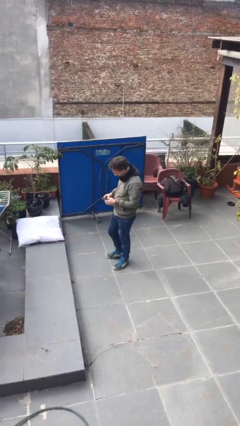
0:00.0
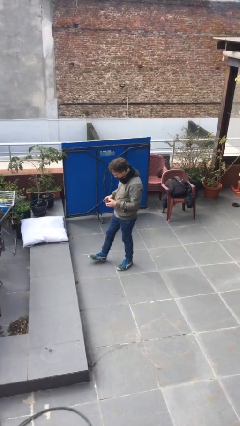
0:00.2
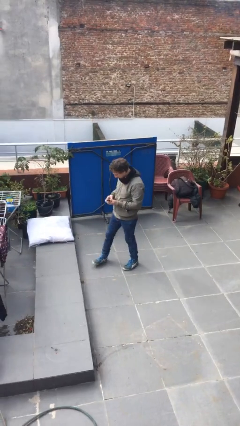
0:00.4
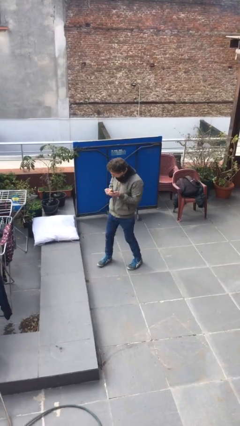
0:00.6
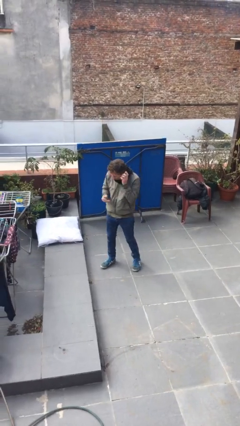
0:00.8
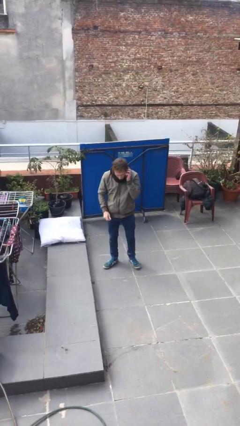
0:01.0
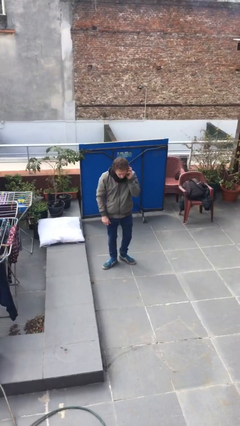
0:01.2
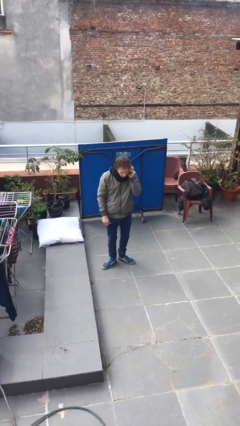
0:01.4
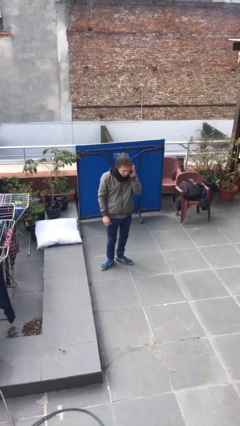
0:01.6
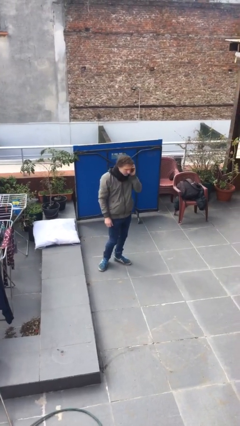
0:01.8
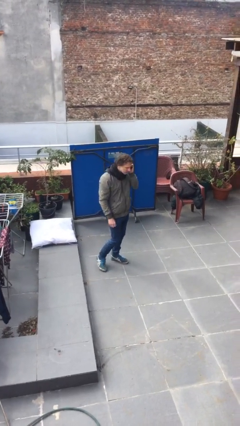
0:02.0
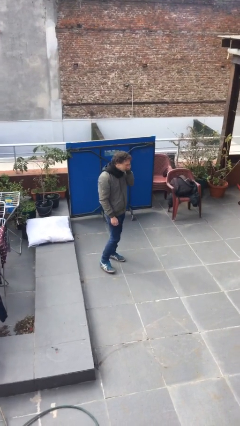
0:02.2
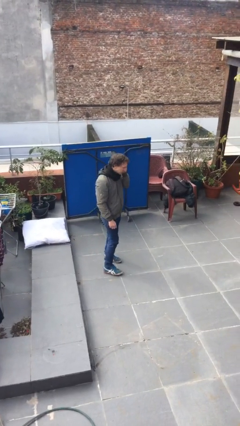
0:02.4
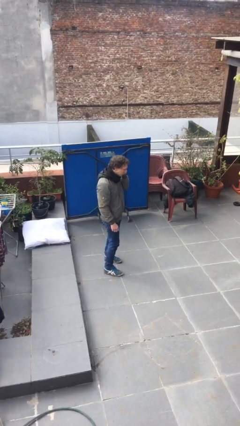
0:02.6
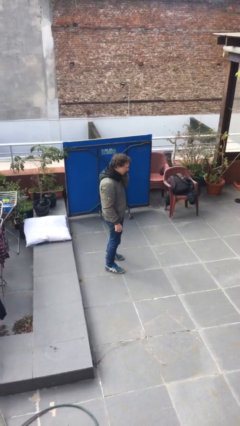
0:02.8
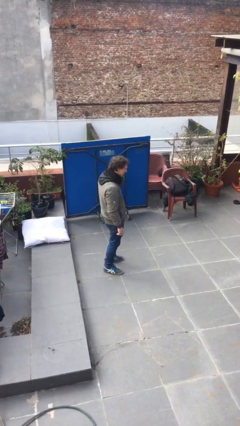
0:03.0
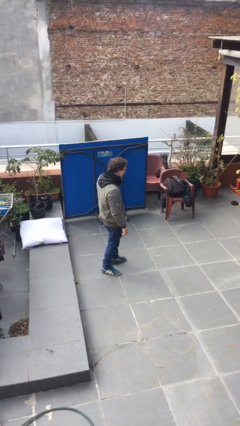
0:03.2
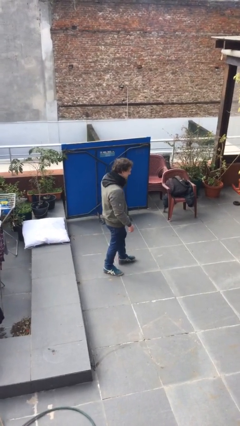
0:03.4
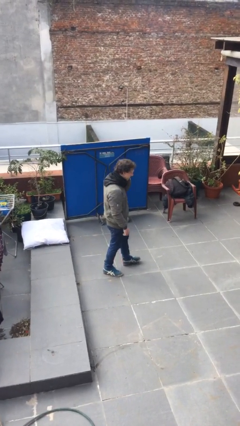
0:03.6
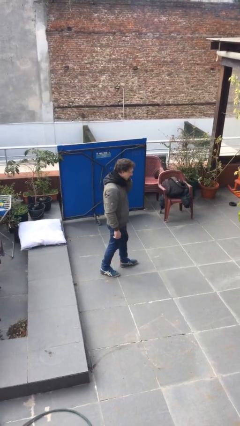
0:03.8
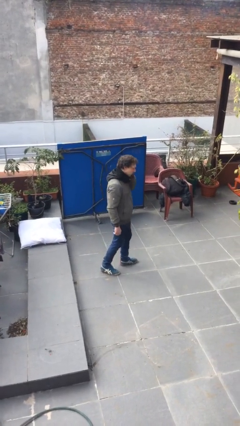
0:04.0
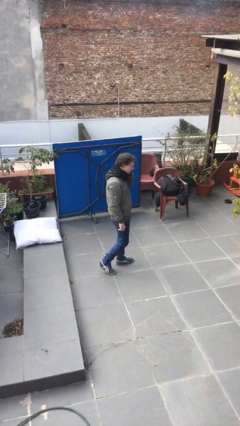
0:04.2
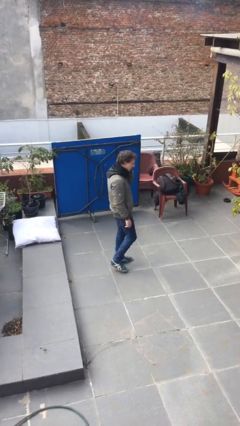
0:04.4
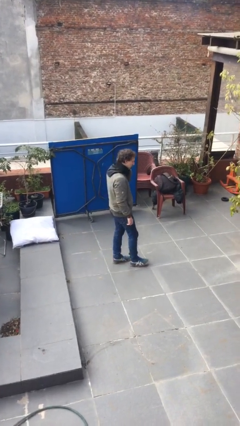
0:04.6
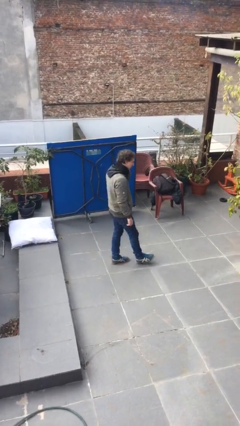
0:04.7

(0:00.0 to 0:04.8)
person talks on phone

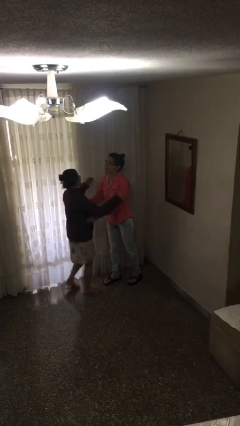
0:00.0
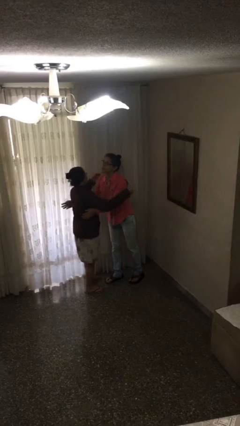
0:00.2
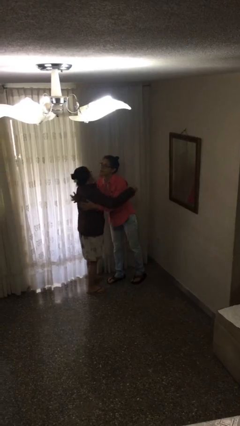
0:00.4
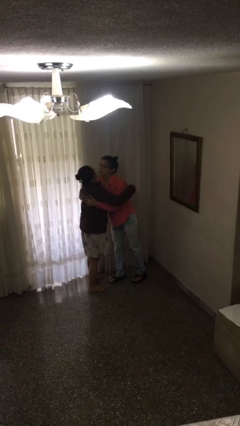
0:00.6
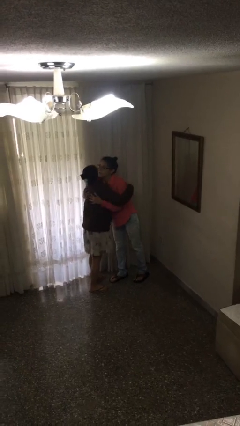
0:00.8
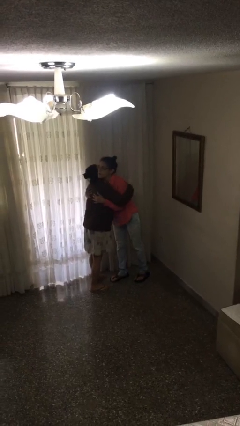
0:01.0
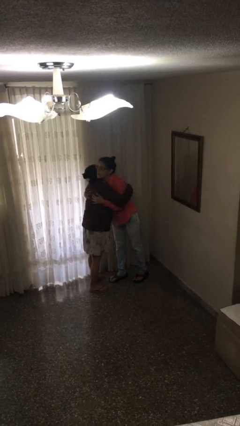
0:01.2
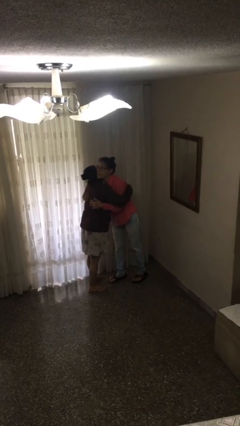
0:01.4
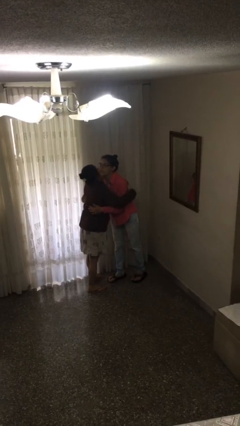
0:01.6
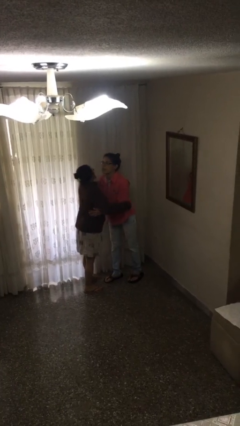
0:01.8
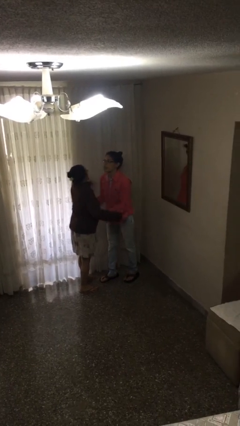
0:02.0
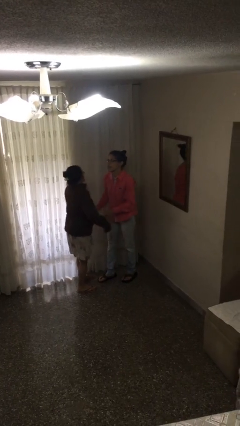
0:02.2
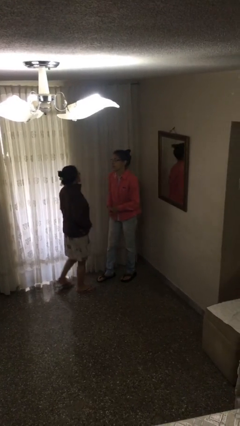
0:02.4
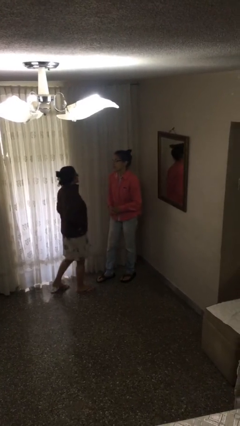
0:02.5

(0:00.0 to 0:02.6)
person embraces person

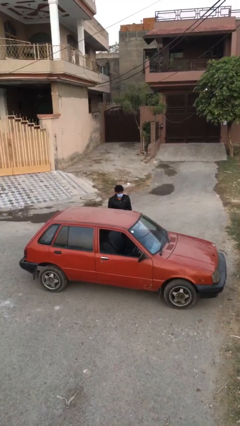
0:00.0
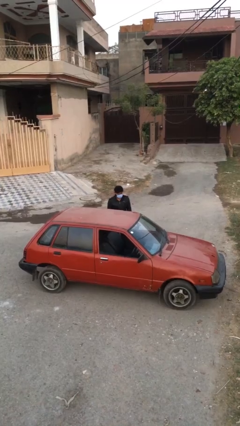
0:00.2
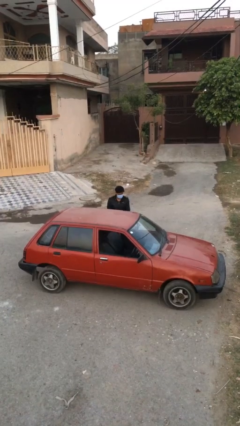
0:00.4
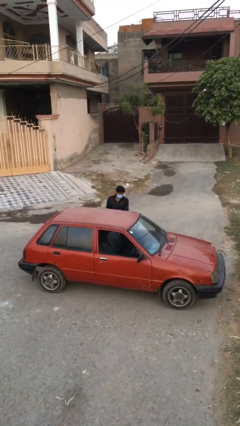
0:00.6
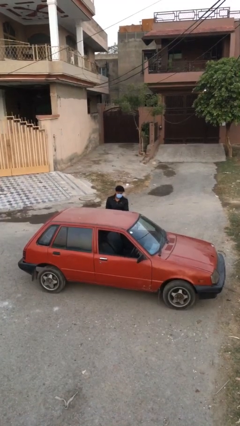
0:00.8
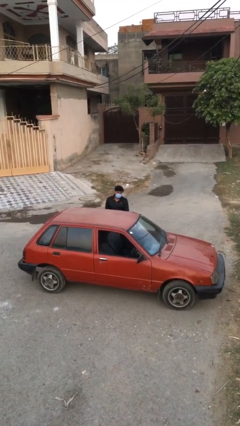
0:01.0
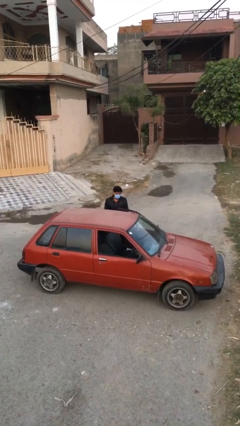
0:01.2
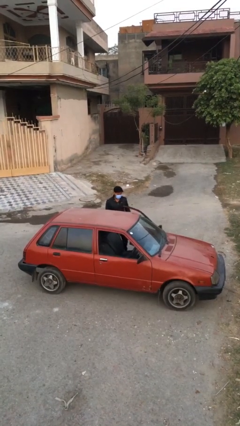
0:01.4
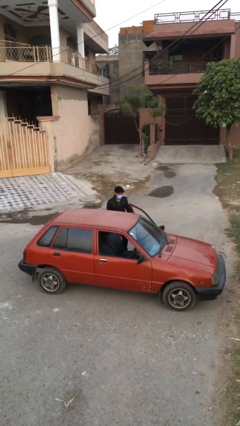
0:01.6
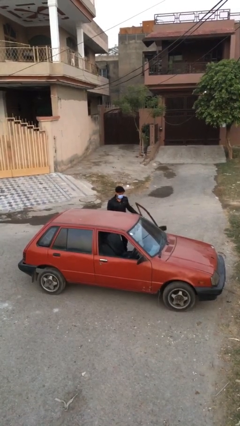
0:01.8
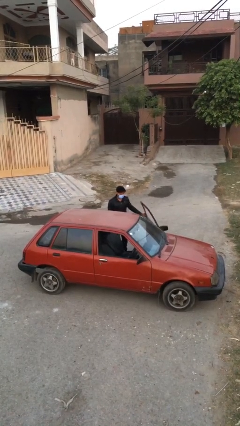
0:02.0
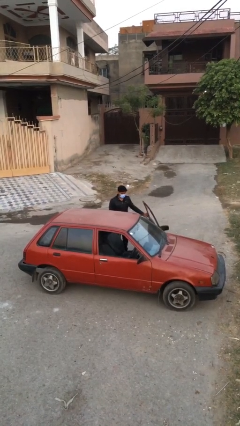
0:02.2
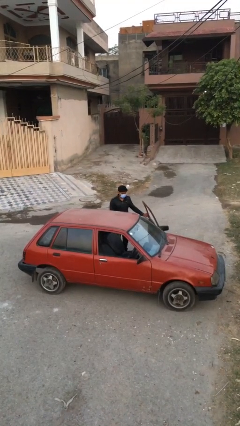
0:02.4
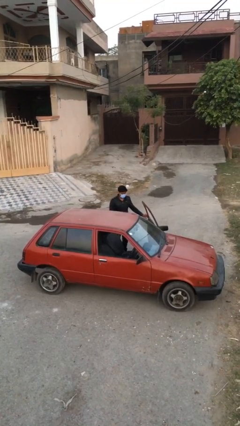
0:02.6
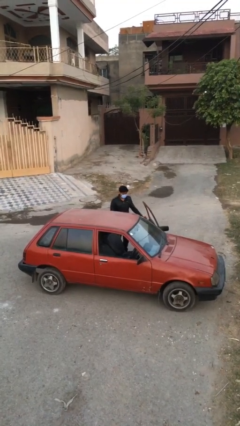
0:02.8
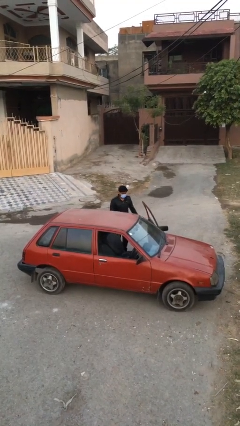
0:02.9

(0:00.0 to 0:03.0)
person opens car door

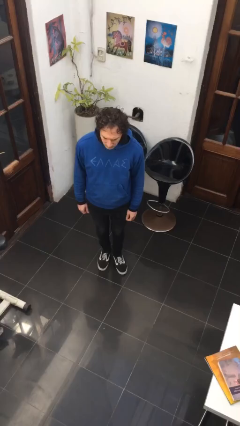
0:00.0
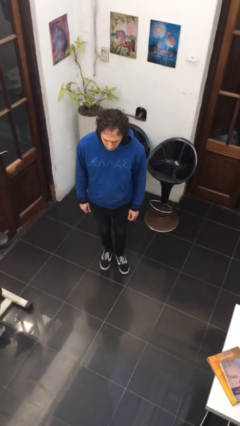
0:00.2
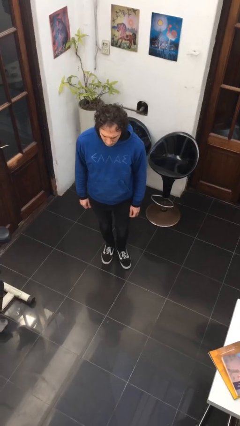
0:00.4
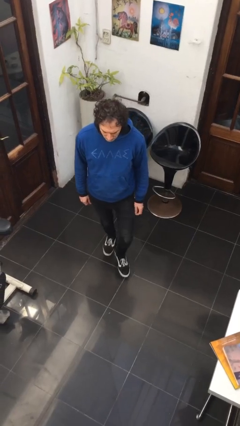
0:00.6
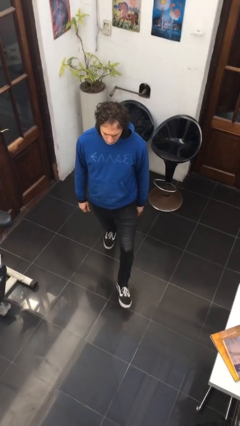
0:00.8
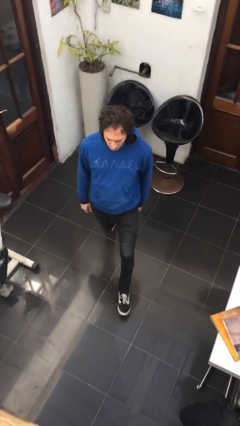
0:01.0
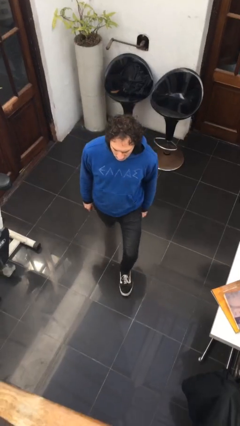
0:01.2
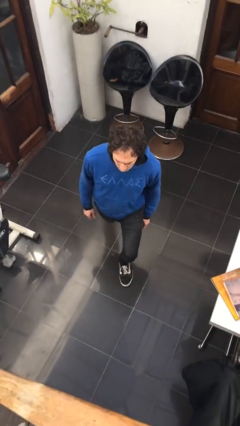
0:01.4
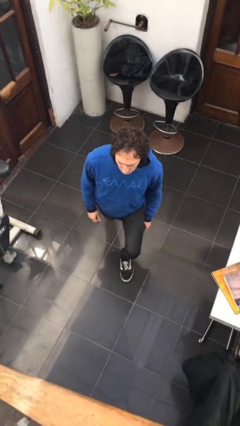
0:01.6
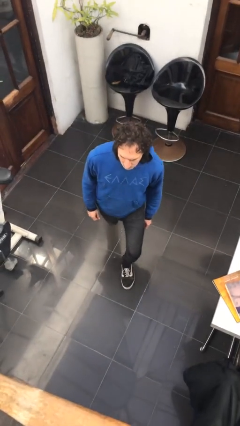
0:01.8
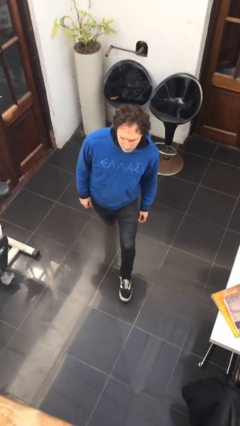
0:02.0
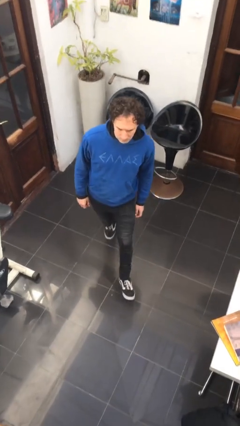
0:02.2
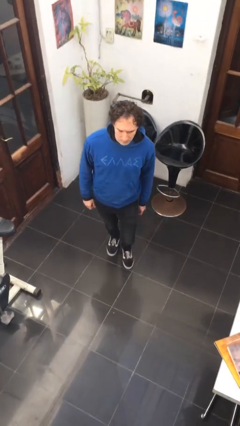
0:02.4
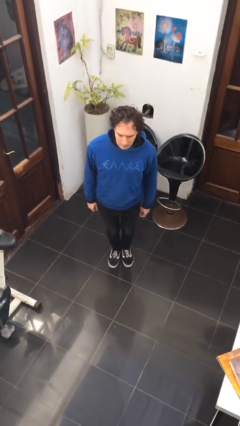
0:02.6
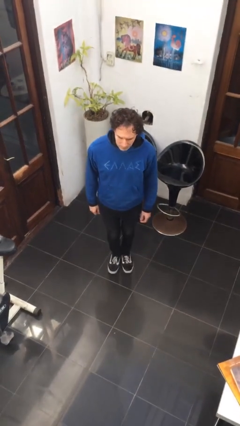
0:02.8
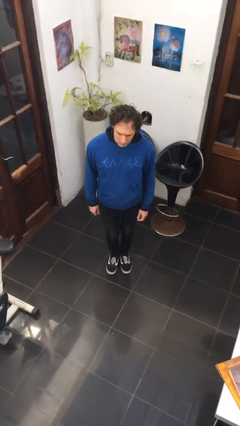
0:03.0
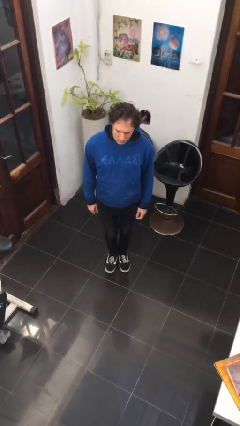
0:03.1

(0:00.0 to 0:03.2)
person exercises with lunges

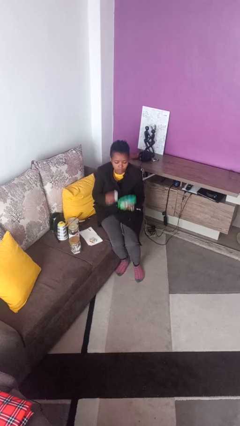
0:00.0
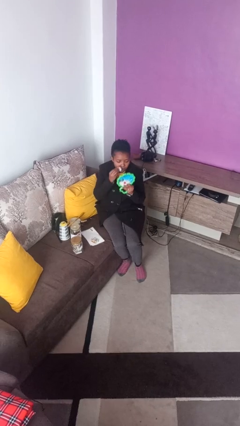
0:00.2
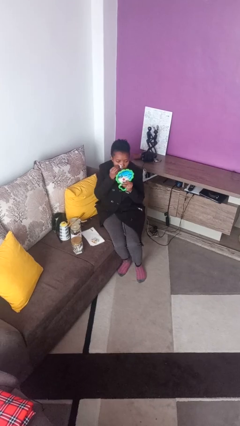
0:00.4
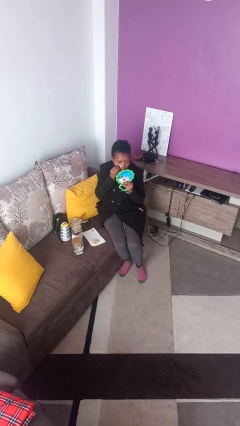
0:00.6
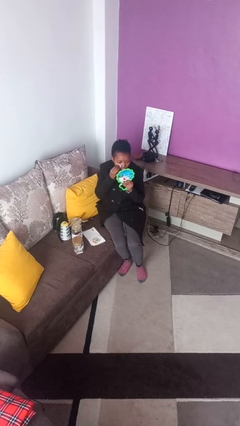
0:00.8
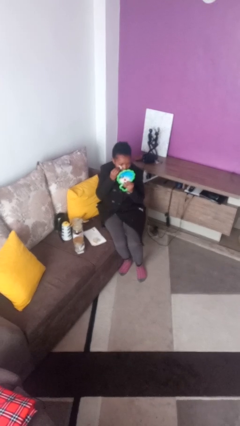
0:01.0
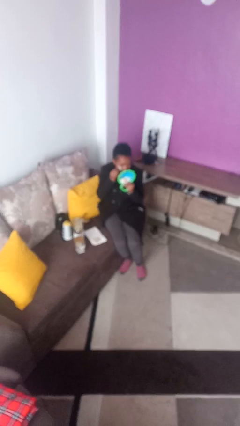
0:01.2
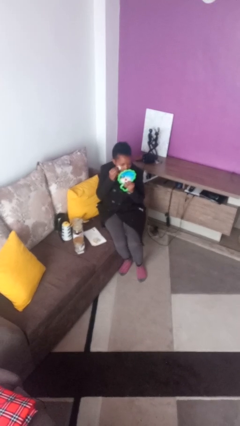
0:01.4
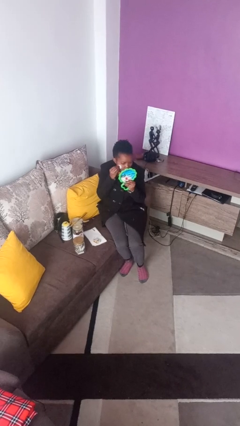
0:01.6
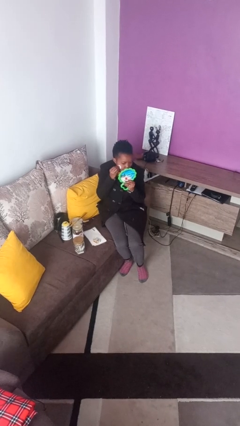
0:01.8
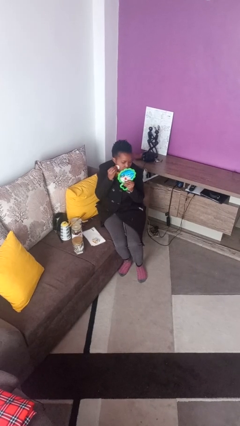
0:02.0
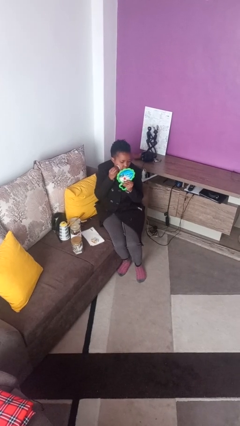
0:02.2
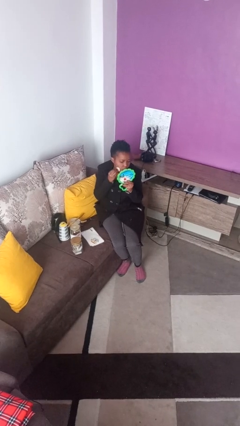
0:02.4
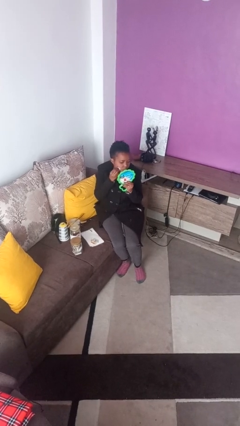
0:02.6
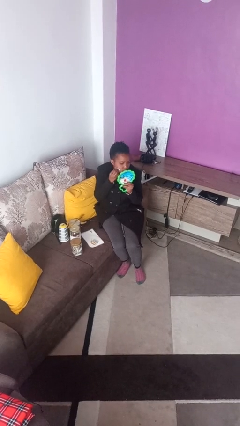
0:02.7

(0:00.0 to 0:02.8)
person applies foundation makeup

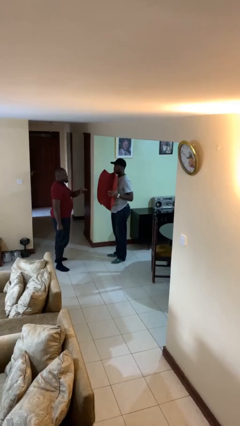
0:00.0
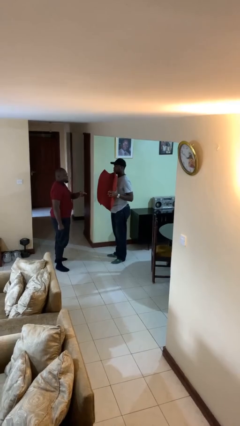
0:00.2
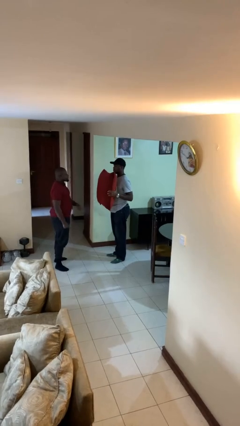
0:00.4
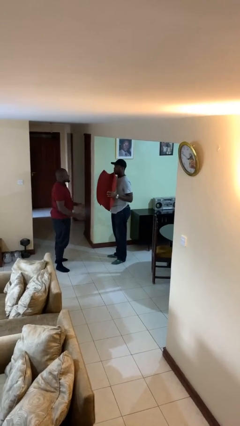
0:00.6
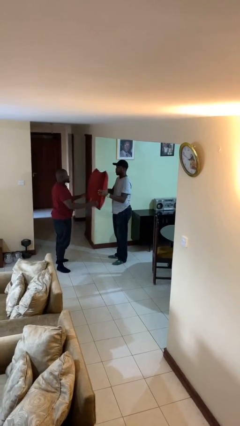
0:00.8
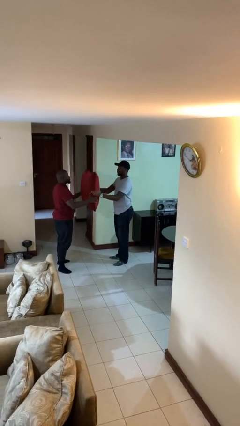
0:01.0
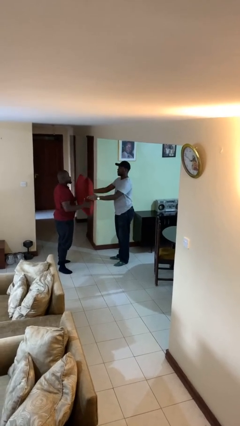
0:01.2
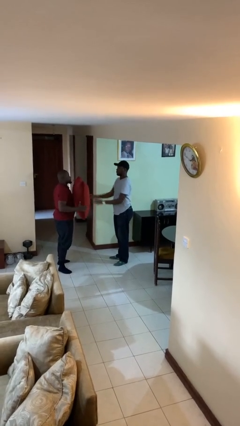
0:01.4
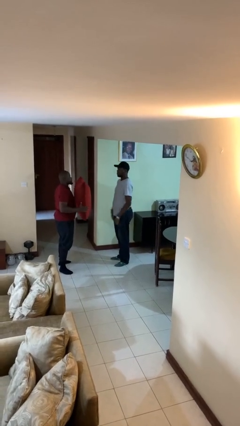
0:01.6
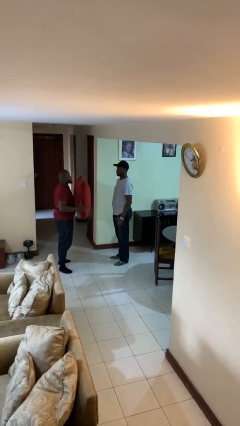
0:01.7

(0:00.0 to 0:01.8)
person transfers object to person
